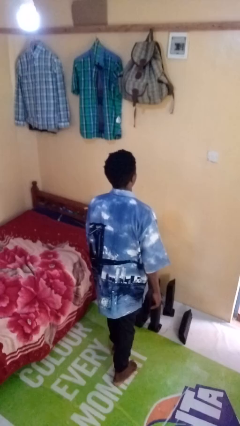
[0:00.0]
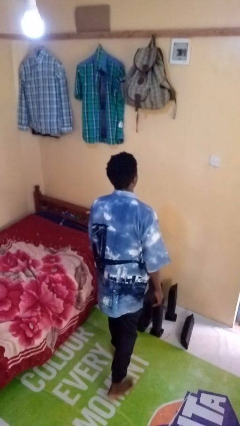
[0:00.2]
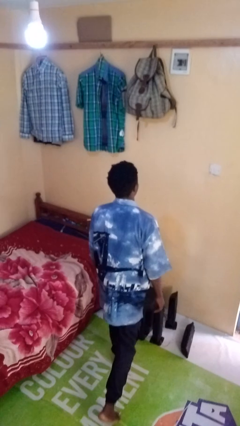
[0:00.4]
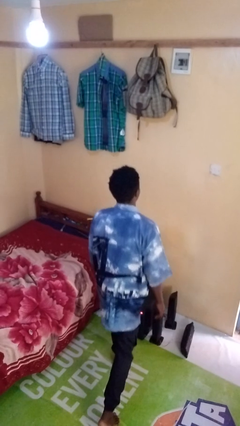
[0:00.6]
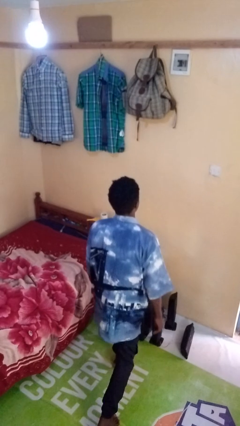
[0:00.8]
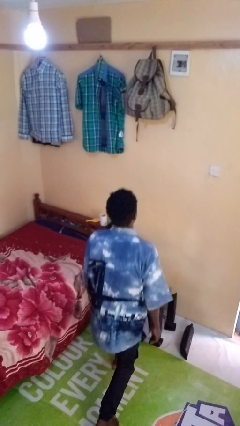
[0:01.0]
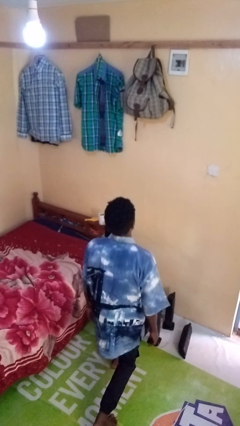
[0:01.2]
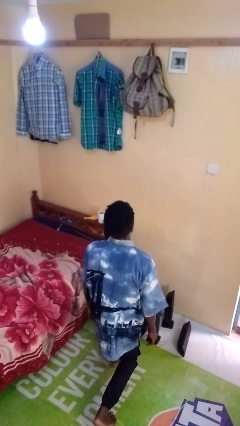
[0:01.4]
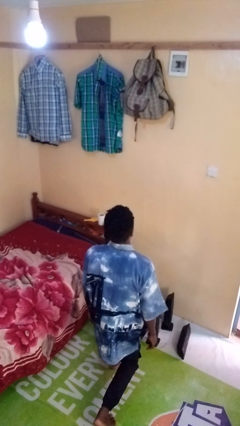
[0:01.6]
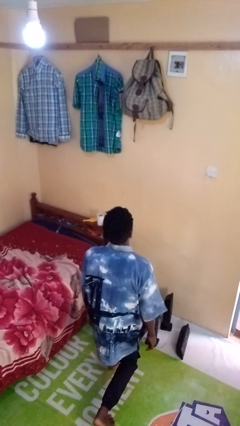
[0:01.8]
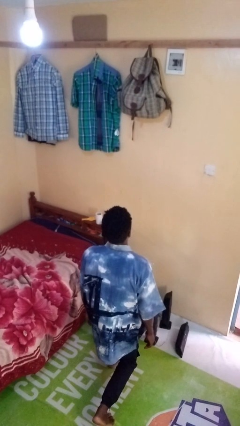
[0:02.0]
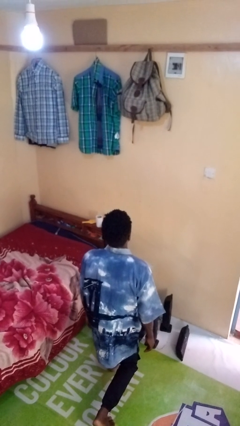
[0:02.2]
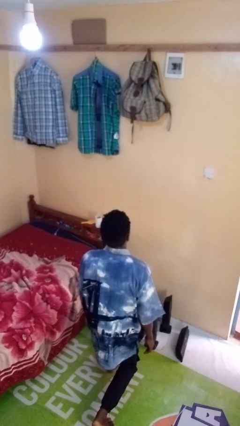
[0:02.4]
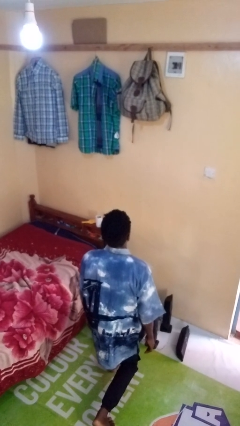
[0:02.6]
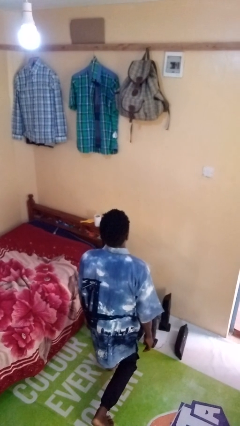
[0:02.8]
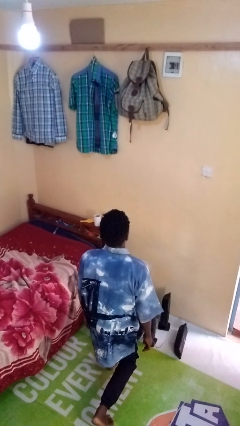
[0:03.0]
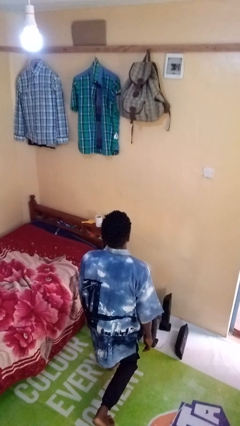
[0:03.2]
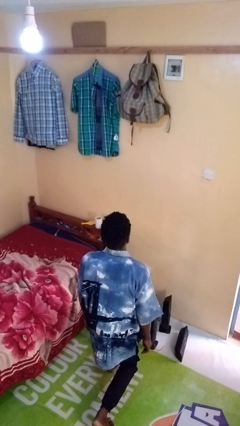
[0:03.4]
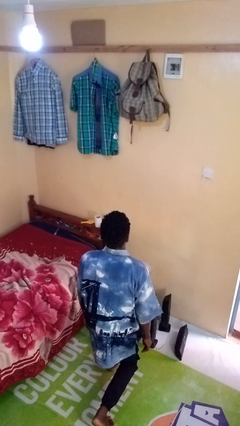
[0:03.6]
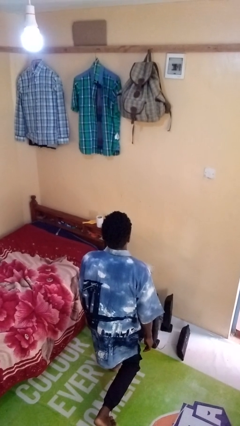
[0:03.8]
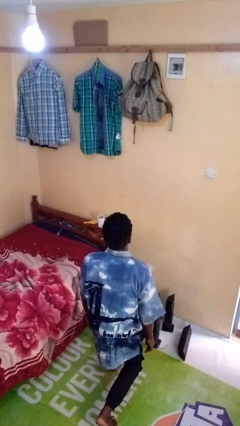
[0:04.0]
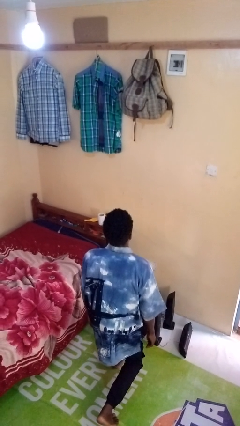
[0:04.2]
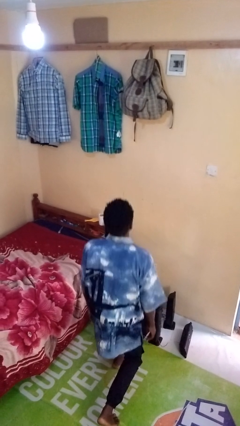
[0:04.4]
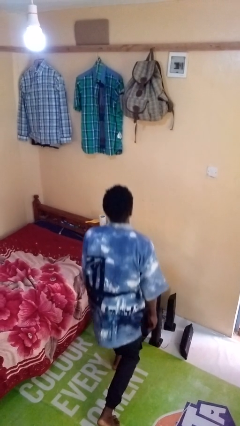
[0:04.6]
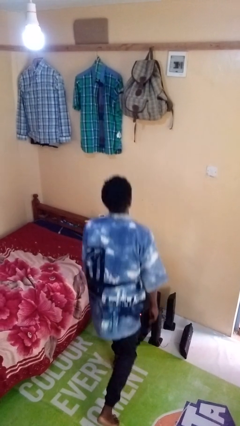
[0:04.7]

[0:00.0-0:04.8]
person exercises with lunges

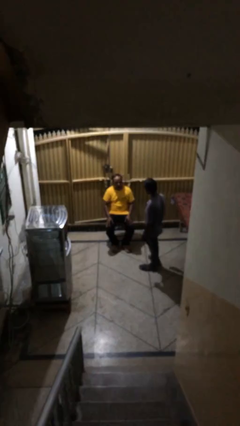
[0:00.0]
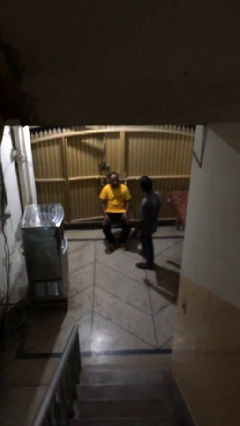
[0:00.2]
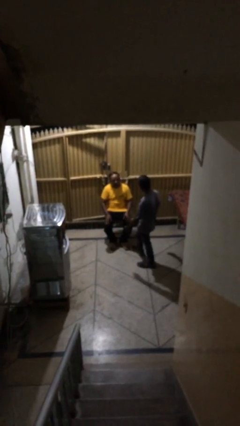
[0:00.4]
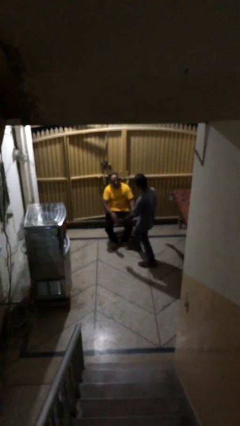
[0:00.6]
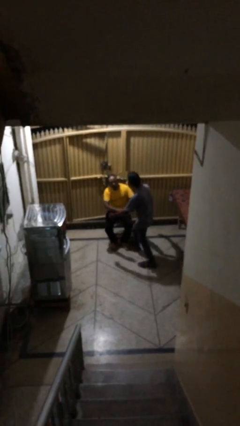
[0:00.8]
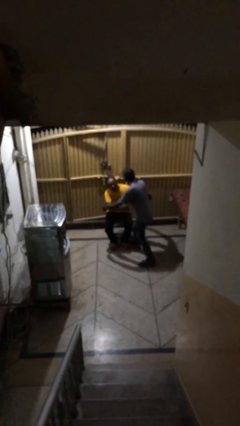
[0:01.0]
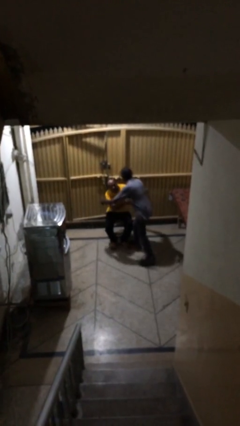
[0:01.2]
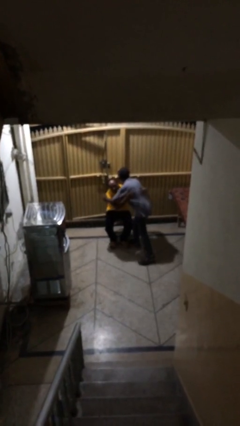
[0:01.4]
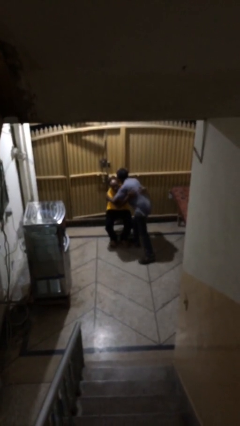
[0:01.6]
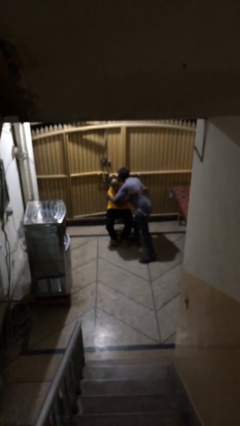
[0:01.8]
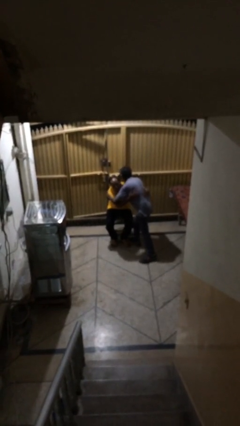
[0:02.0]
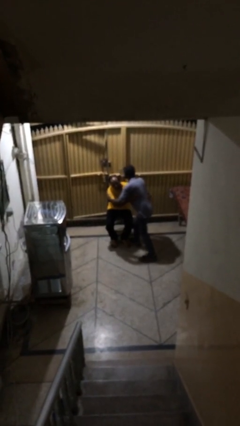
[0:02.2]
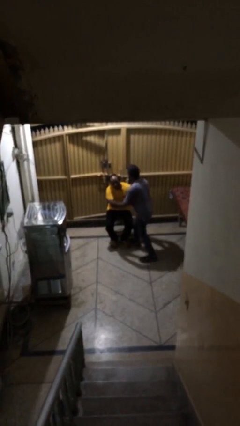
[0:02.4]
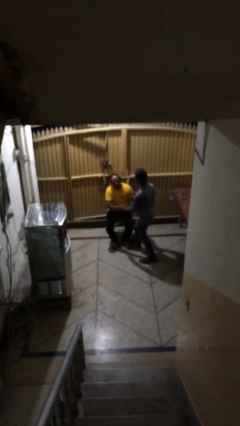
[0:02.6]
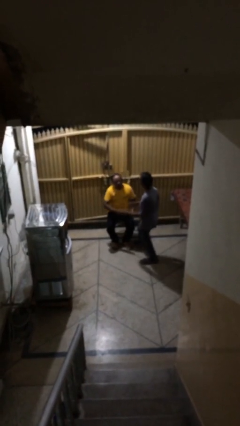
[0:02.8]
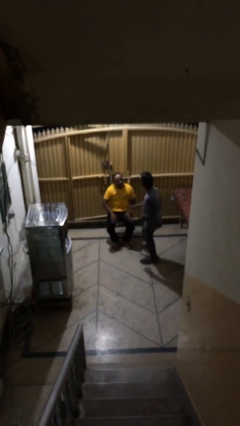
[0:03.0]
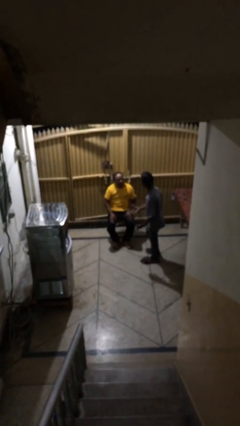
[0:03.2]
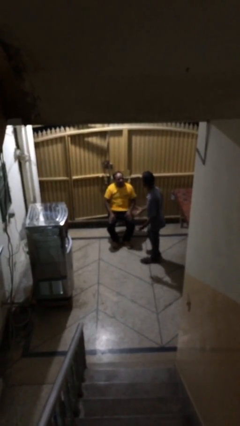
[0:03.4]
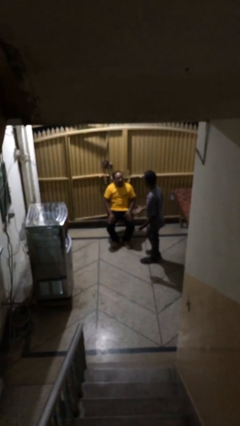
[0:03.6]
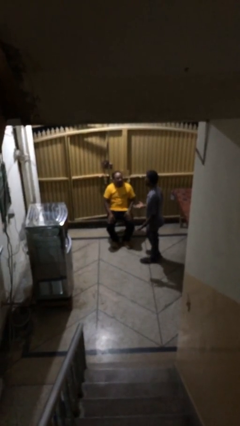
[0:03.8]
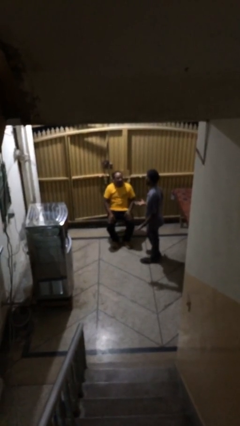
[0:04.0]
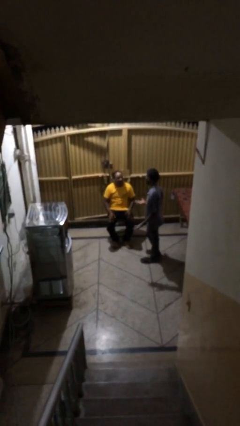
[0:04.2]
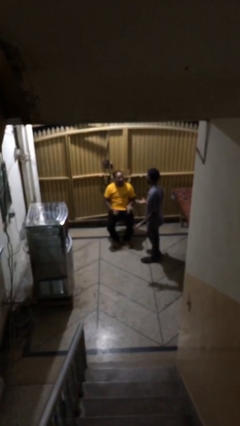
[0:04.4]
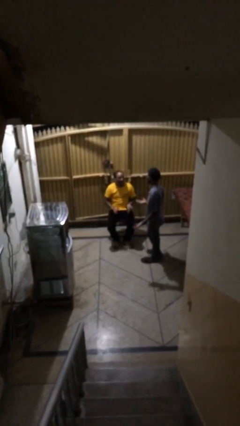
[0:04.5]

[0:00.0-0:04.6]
person embraces person

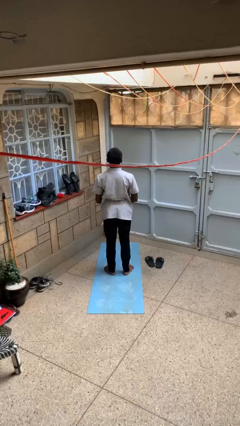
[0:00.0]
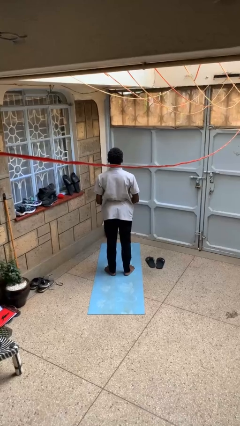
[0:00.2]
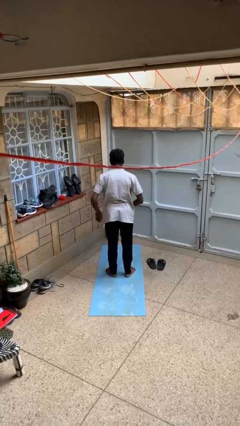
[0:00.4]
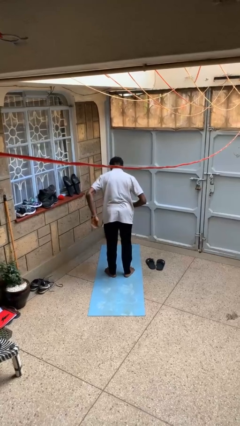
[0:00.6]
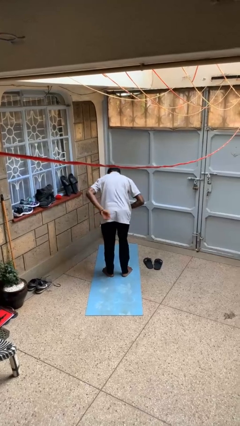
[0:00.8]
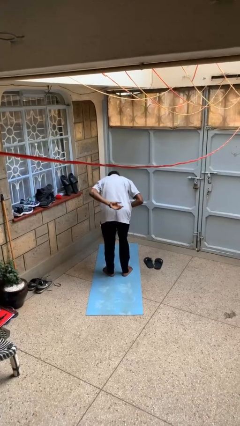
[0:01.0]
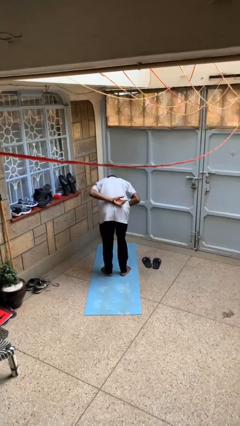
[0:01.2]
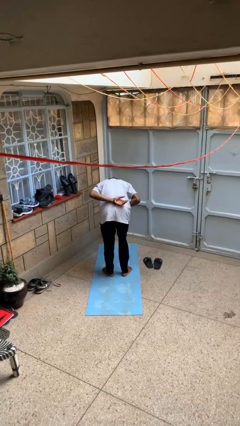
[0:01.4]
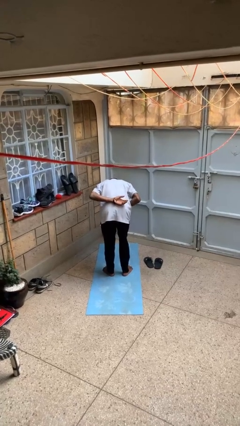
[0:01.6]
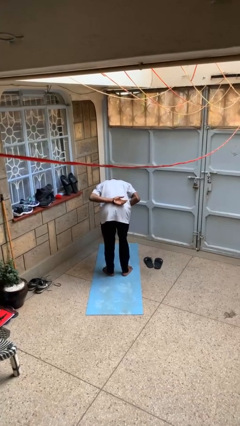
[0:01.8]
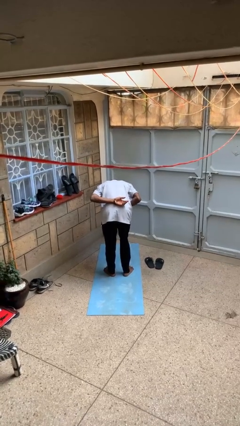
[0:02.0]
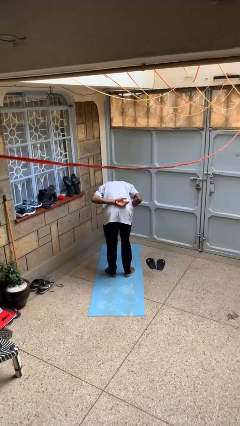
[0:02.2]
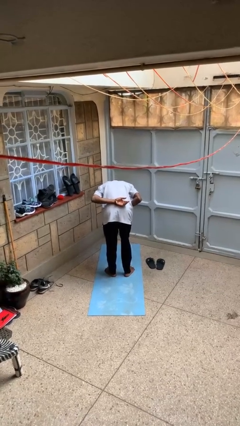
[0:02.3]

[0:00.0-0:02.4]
person bows

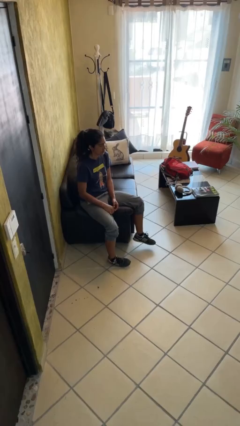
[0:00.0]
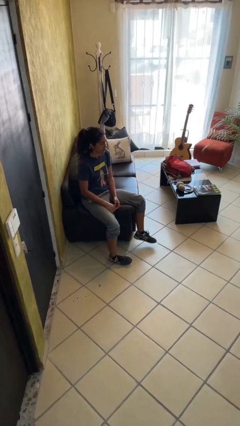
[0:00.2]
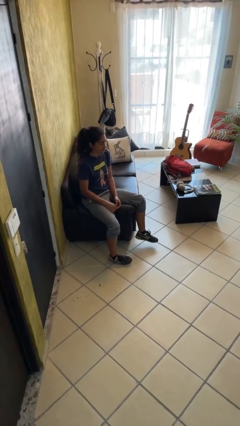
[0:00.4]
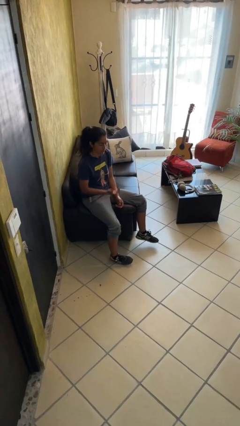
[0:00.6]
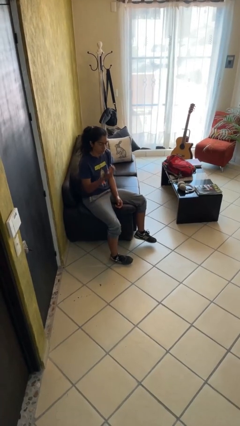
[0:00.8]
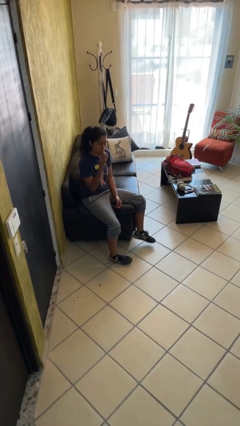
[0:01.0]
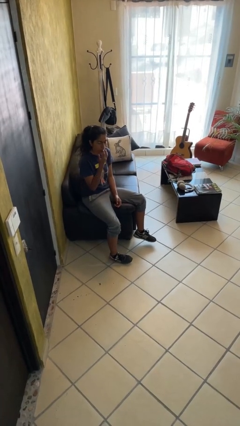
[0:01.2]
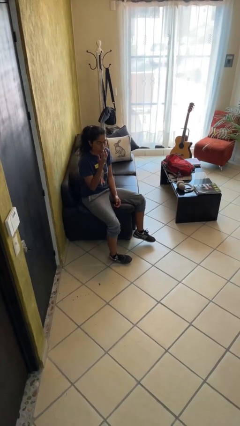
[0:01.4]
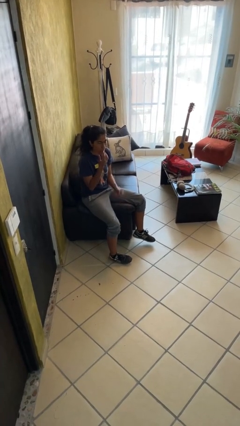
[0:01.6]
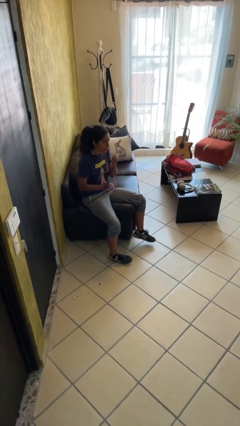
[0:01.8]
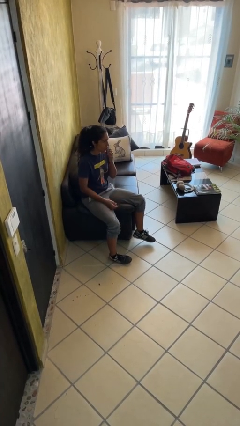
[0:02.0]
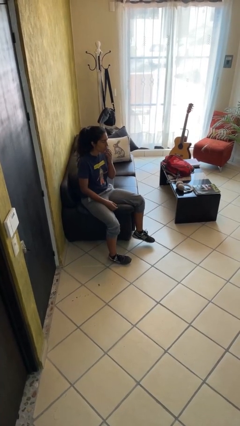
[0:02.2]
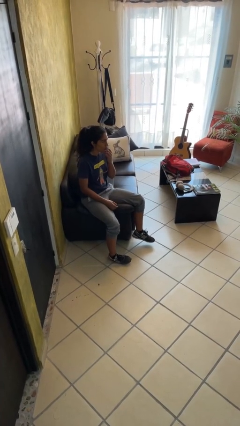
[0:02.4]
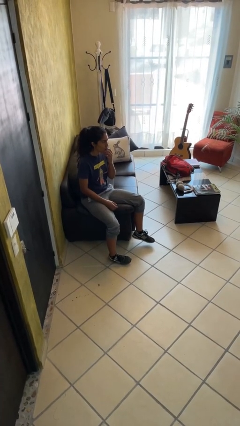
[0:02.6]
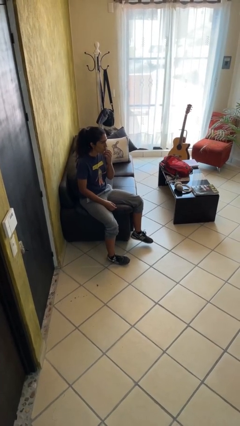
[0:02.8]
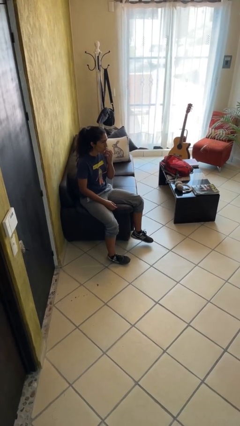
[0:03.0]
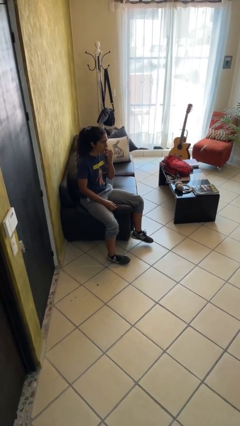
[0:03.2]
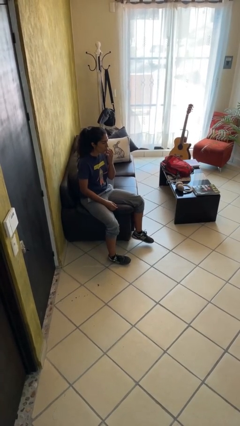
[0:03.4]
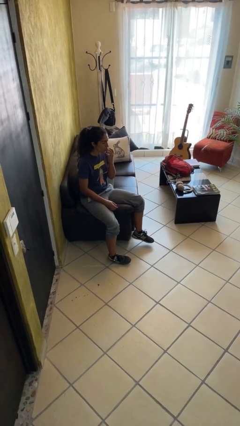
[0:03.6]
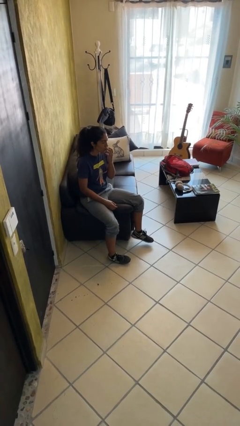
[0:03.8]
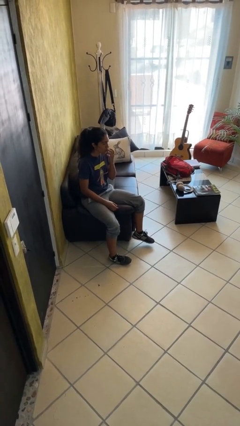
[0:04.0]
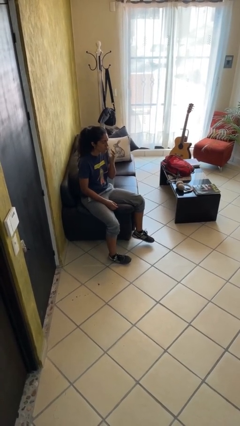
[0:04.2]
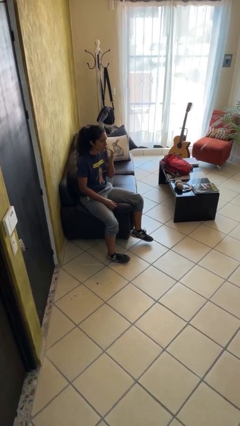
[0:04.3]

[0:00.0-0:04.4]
person licks fingers

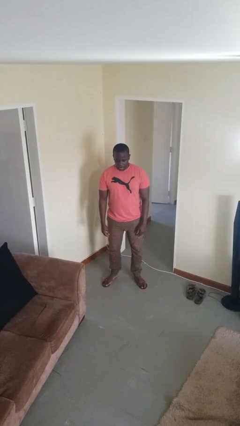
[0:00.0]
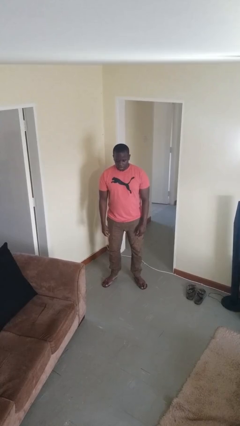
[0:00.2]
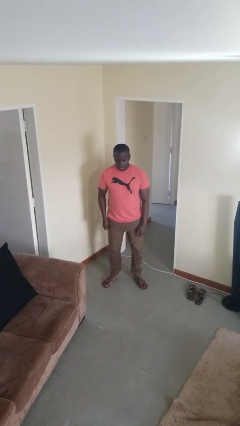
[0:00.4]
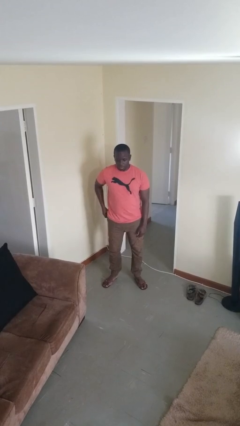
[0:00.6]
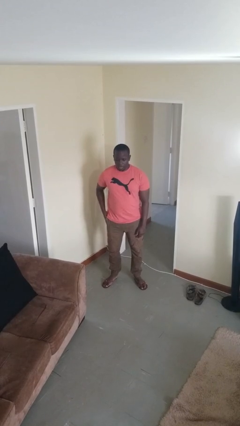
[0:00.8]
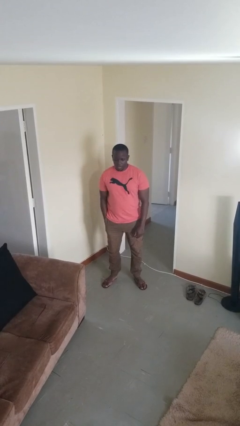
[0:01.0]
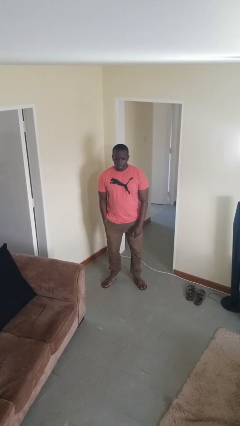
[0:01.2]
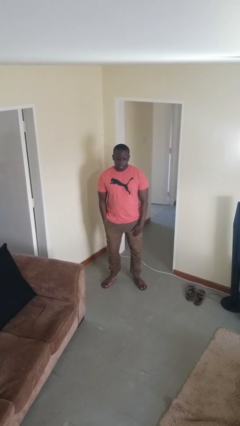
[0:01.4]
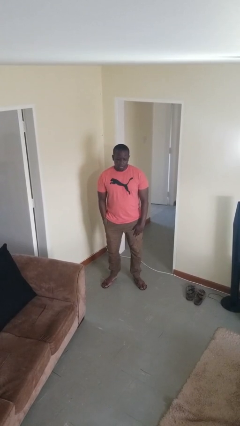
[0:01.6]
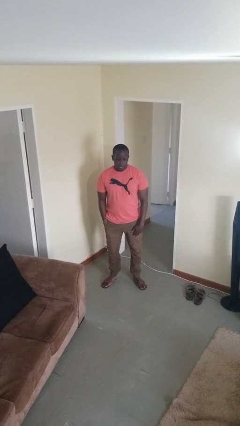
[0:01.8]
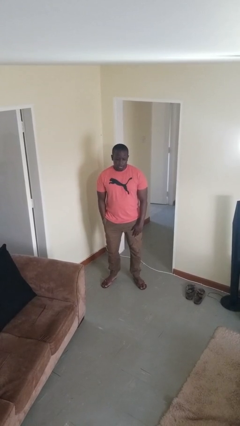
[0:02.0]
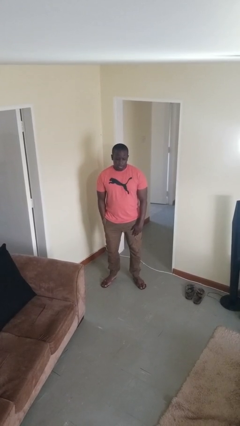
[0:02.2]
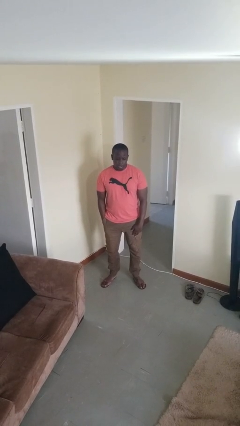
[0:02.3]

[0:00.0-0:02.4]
person puts hands in back pockets
